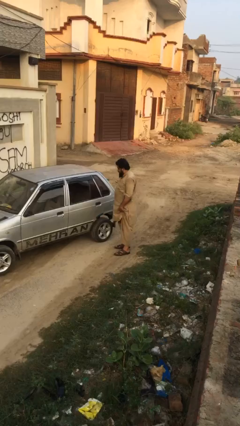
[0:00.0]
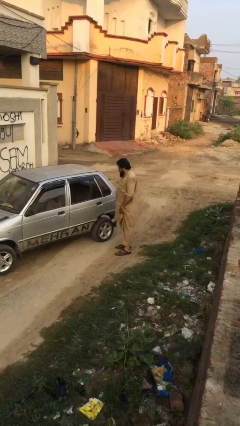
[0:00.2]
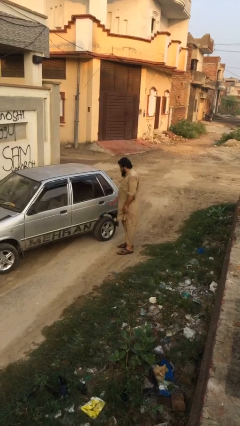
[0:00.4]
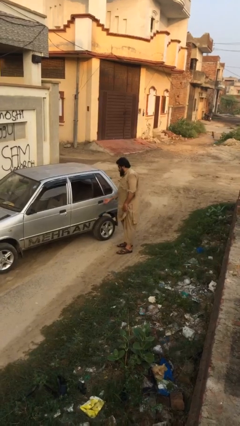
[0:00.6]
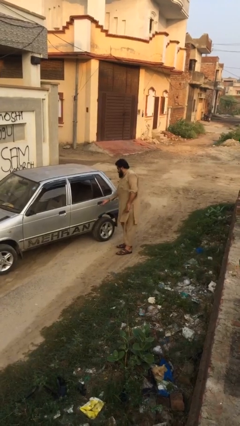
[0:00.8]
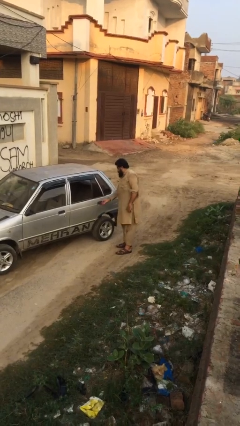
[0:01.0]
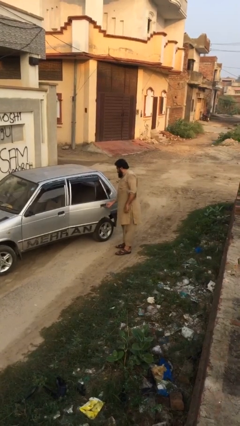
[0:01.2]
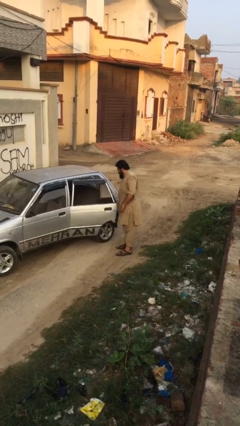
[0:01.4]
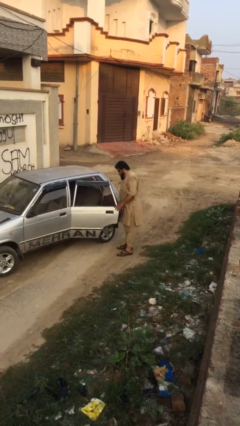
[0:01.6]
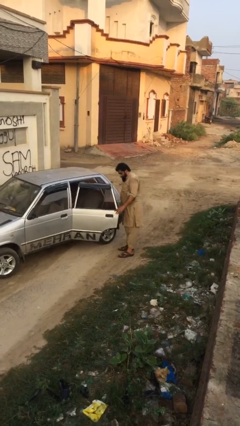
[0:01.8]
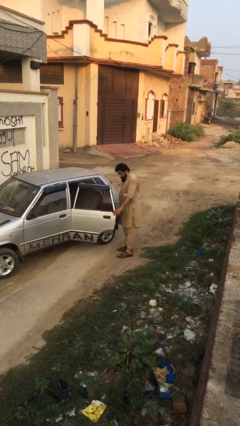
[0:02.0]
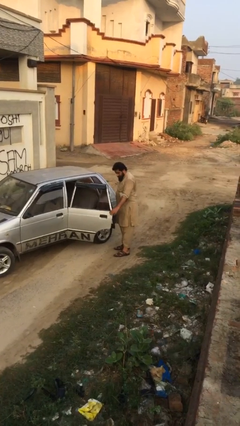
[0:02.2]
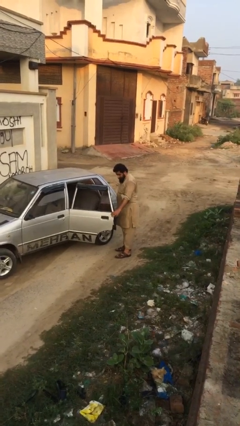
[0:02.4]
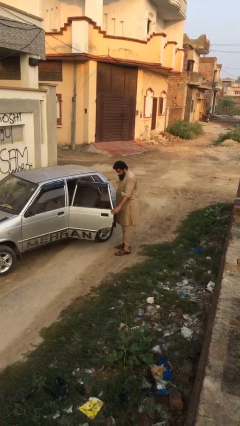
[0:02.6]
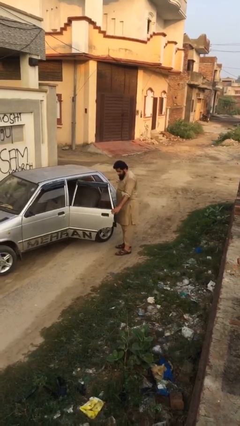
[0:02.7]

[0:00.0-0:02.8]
person opens car door

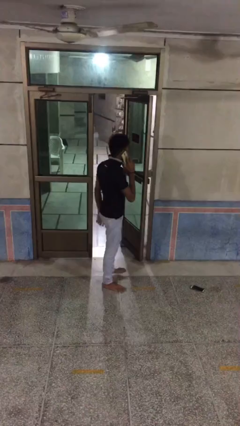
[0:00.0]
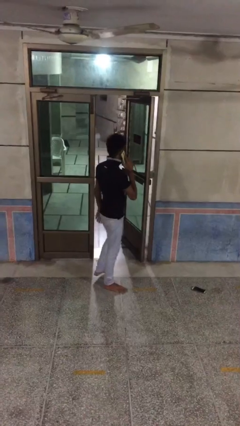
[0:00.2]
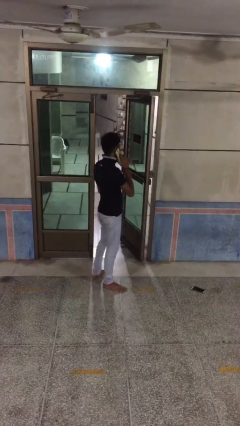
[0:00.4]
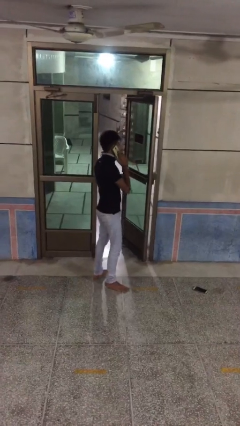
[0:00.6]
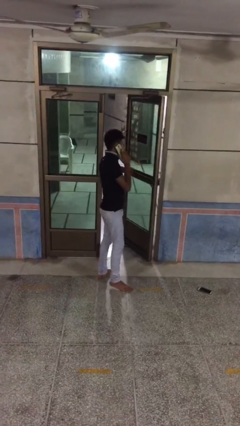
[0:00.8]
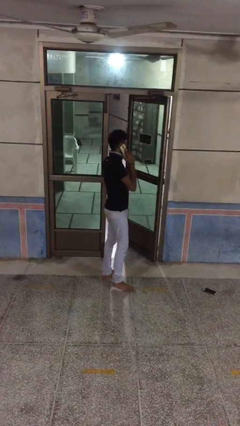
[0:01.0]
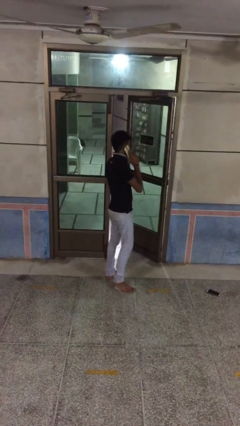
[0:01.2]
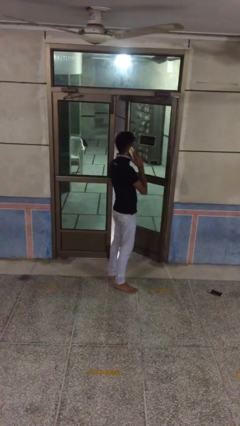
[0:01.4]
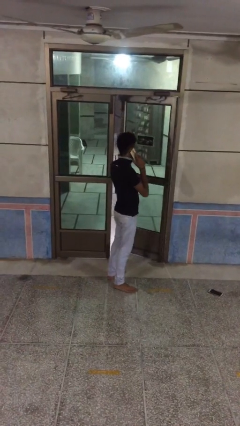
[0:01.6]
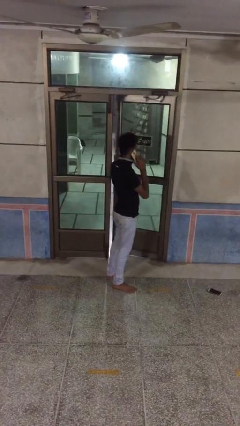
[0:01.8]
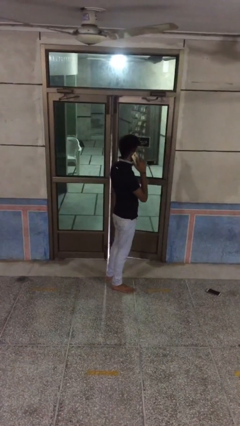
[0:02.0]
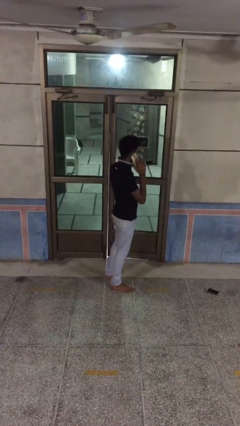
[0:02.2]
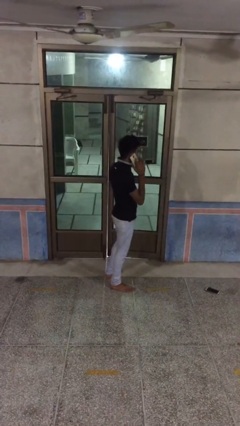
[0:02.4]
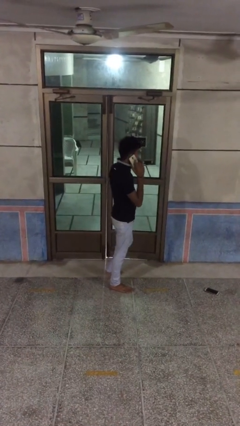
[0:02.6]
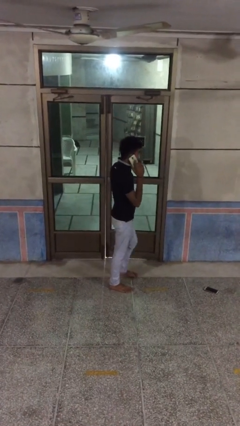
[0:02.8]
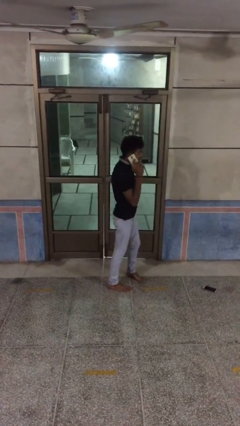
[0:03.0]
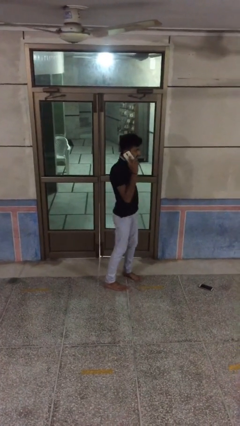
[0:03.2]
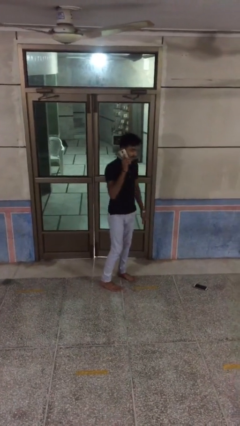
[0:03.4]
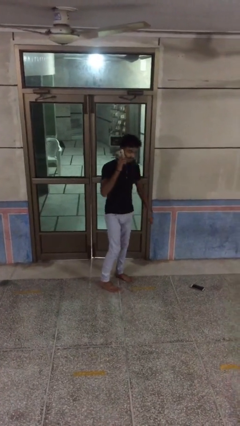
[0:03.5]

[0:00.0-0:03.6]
person closes facility door

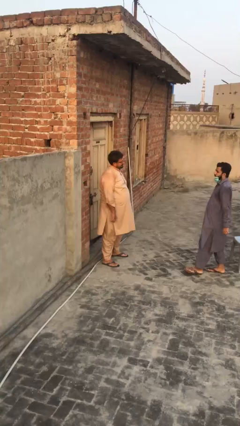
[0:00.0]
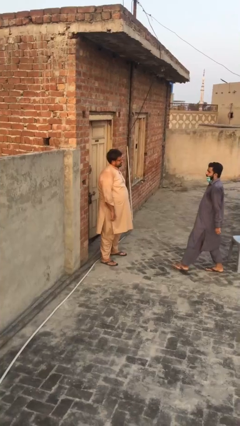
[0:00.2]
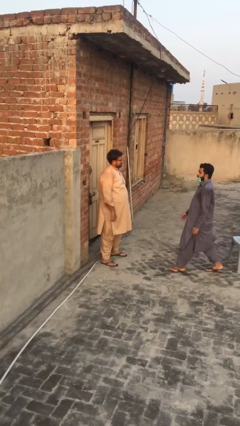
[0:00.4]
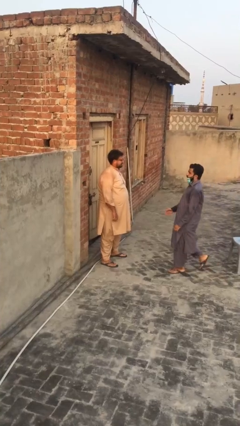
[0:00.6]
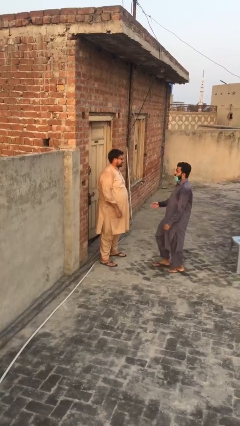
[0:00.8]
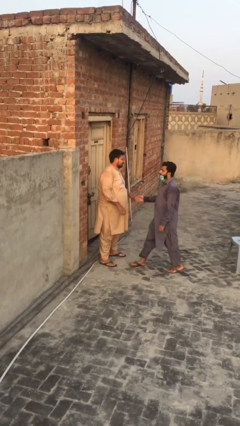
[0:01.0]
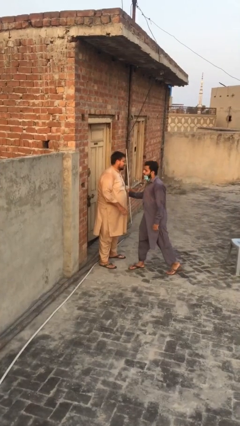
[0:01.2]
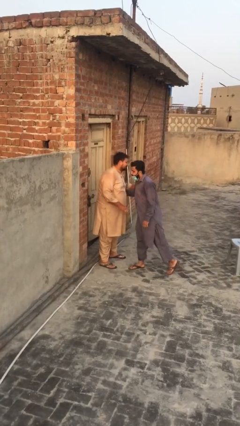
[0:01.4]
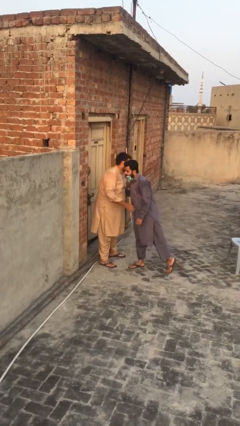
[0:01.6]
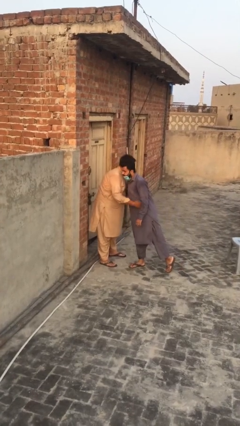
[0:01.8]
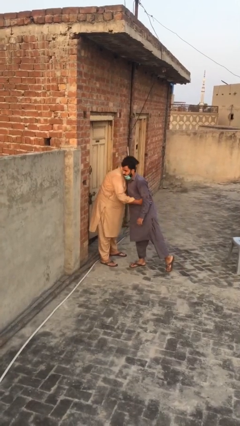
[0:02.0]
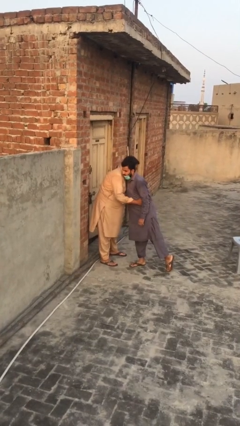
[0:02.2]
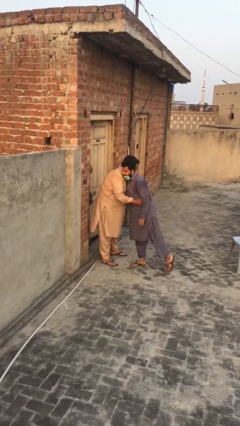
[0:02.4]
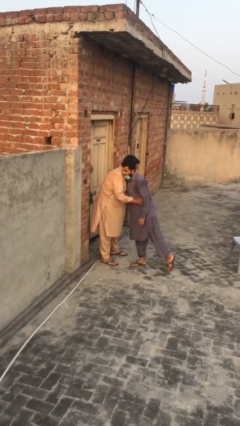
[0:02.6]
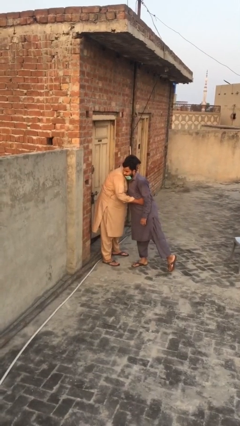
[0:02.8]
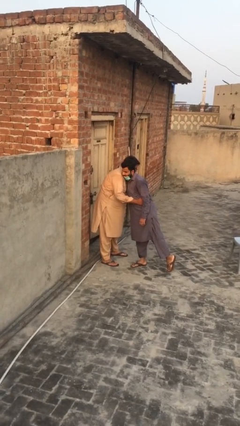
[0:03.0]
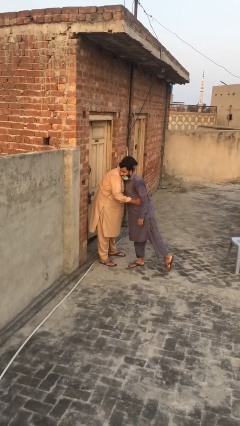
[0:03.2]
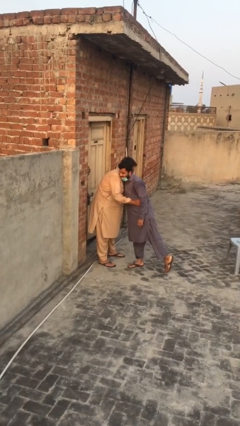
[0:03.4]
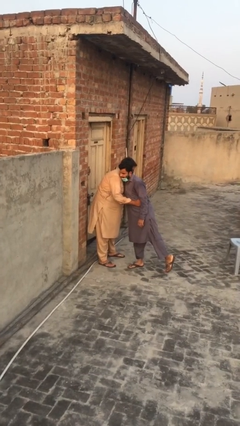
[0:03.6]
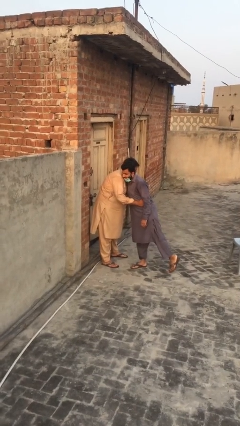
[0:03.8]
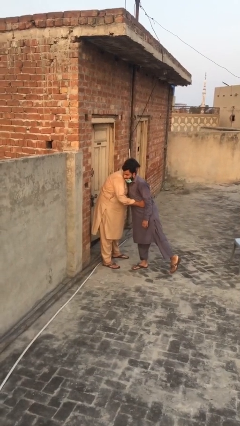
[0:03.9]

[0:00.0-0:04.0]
person embraces person

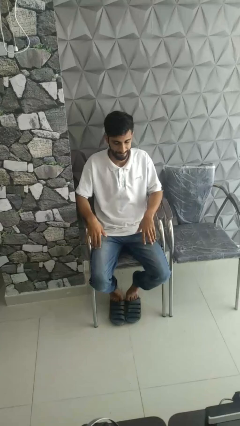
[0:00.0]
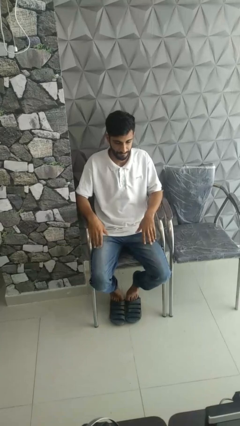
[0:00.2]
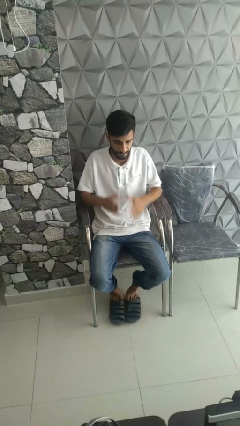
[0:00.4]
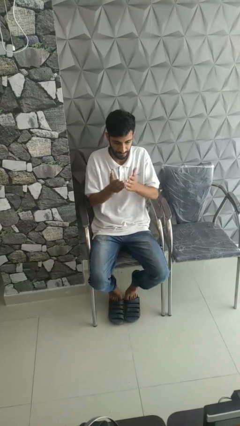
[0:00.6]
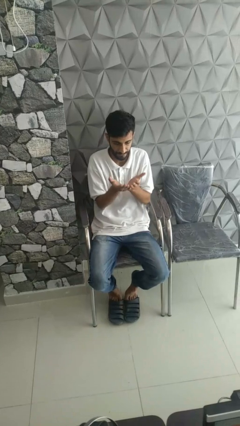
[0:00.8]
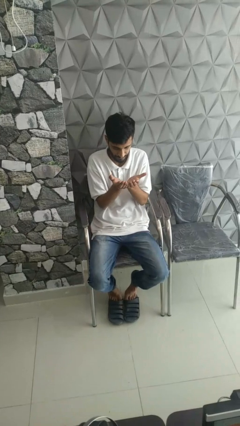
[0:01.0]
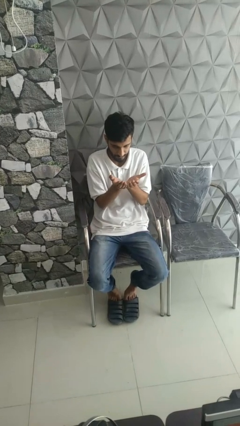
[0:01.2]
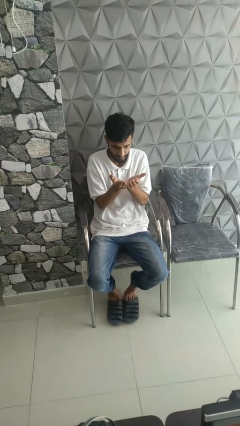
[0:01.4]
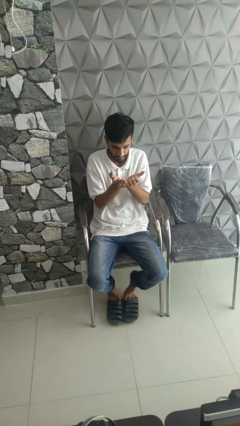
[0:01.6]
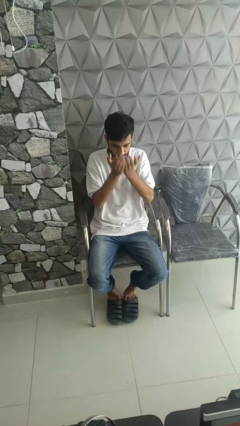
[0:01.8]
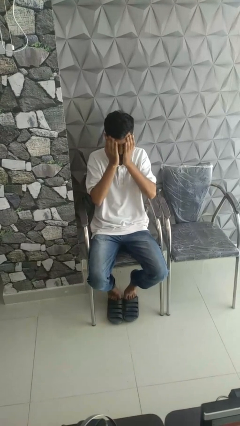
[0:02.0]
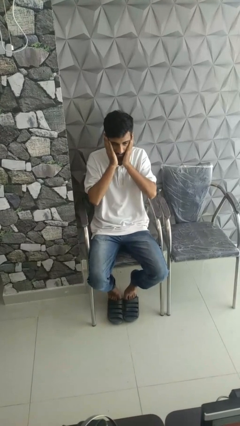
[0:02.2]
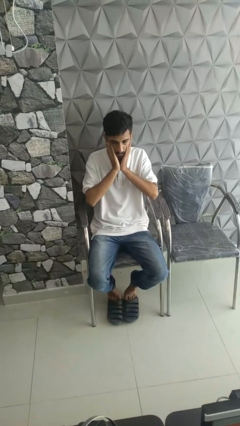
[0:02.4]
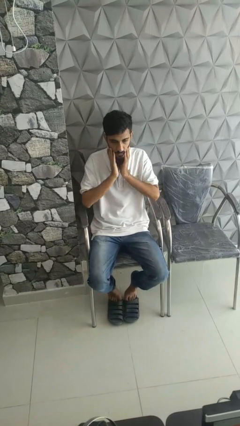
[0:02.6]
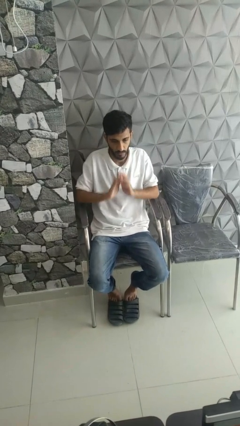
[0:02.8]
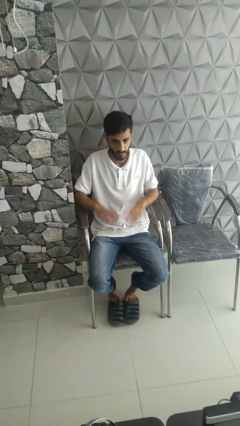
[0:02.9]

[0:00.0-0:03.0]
person prays

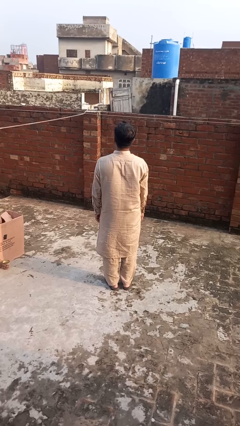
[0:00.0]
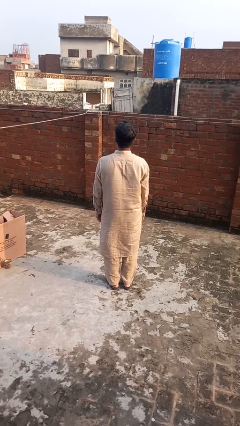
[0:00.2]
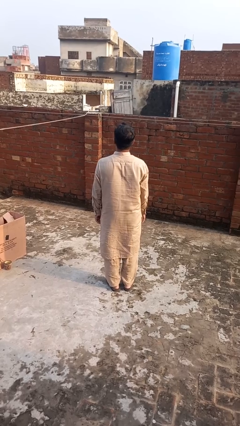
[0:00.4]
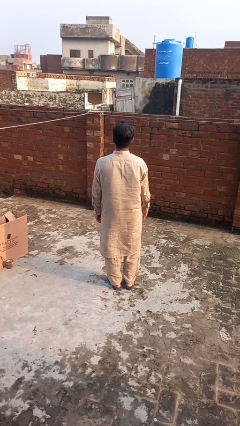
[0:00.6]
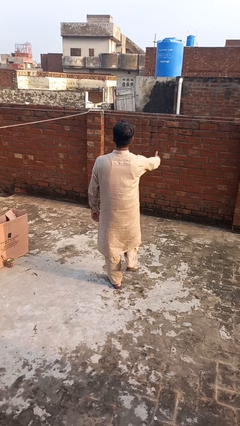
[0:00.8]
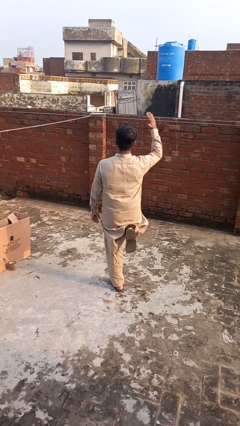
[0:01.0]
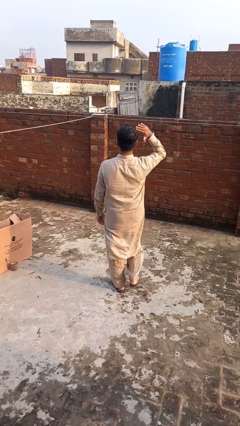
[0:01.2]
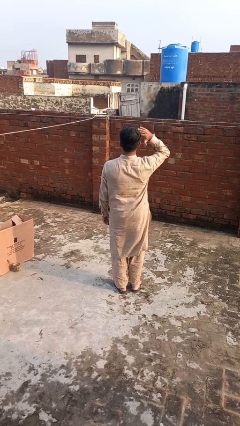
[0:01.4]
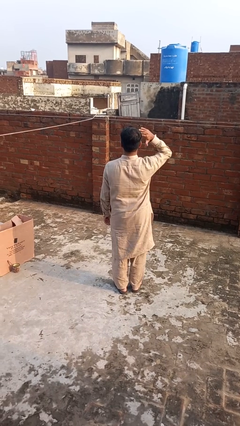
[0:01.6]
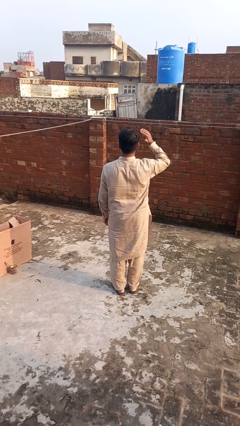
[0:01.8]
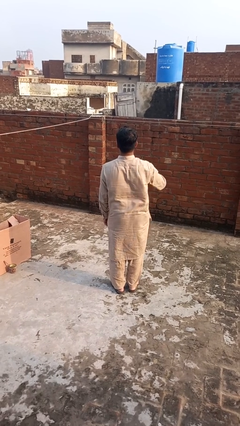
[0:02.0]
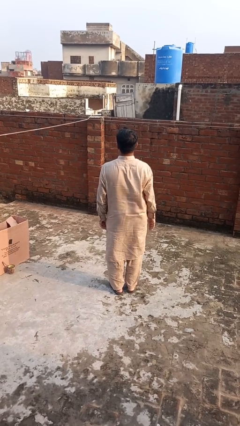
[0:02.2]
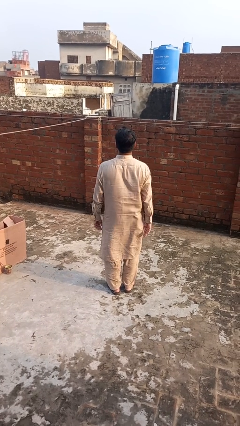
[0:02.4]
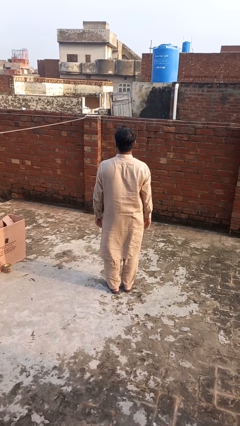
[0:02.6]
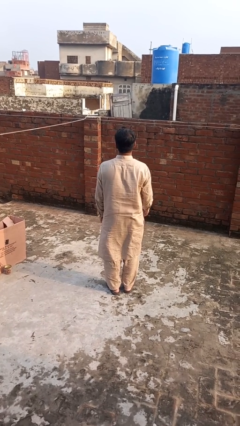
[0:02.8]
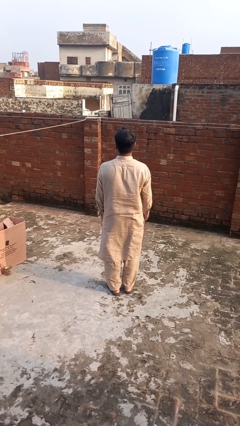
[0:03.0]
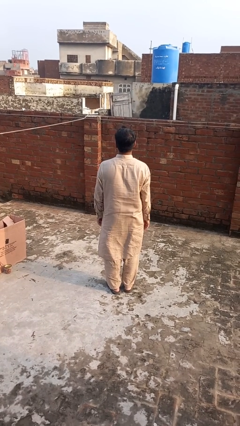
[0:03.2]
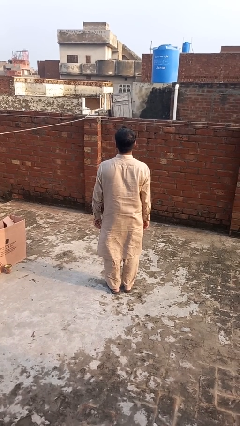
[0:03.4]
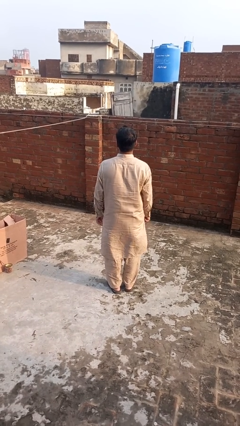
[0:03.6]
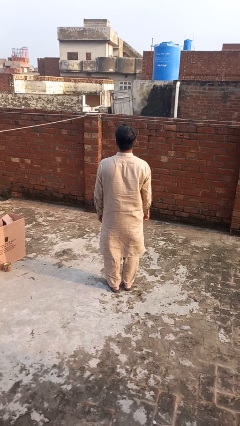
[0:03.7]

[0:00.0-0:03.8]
person salutes

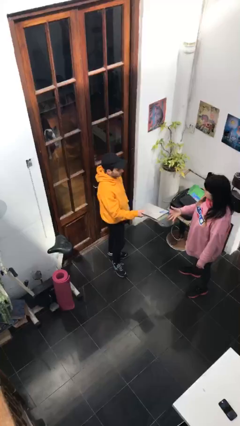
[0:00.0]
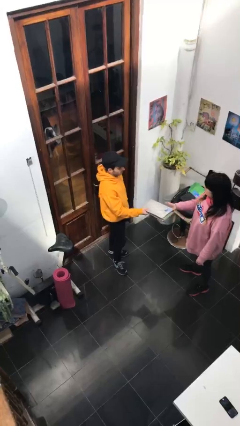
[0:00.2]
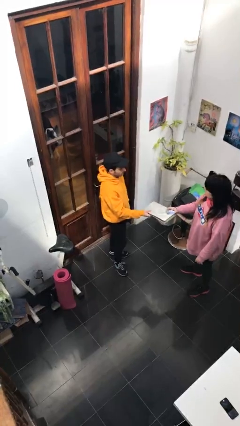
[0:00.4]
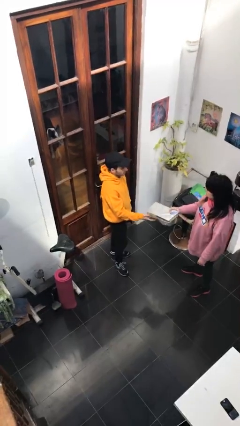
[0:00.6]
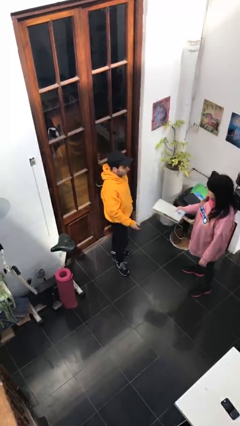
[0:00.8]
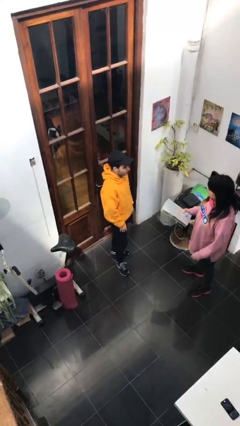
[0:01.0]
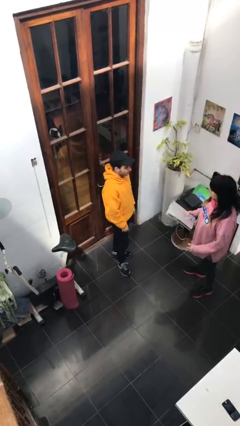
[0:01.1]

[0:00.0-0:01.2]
person transfers object to person
